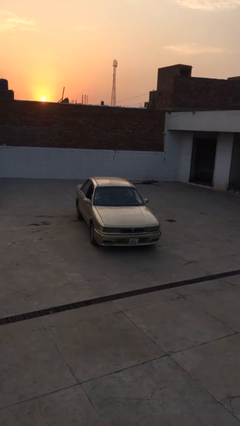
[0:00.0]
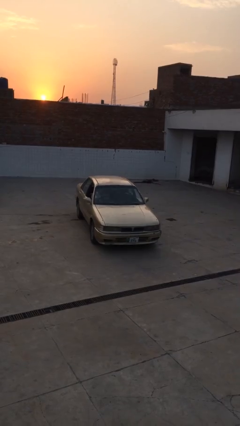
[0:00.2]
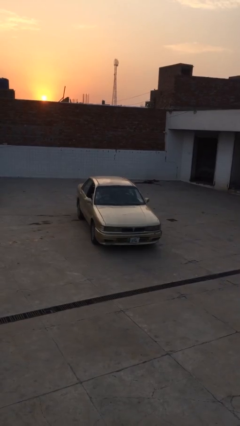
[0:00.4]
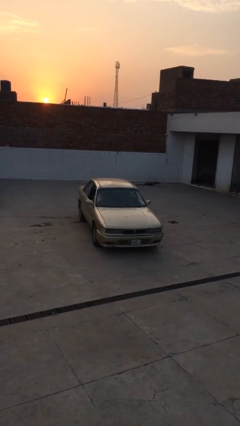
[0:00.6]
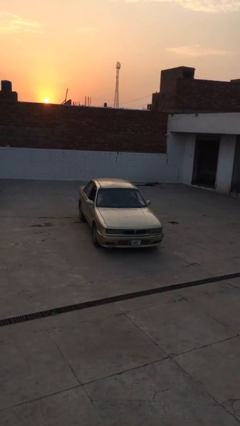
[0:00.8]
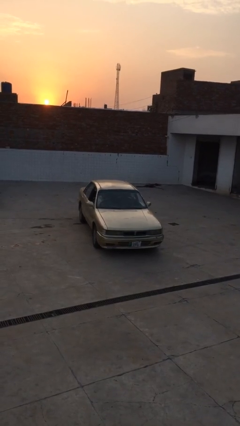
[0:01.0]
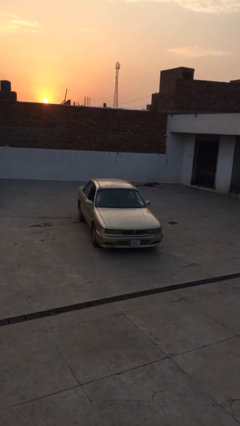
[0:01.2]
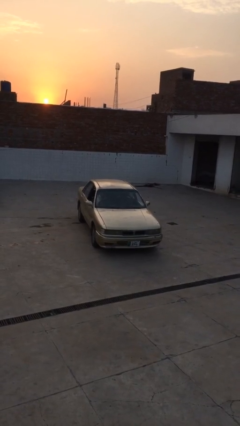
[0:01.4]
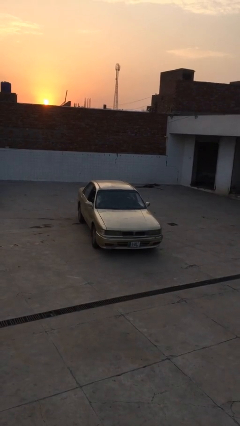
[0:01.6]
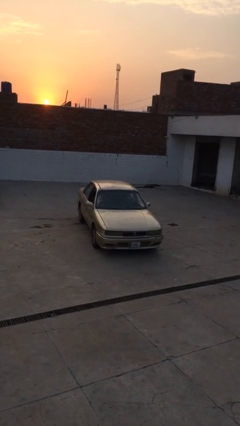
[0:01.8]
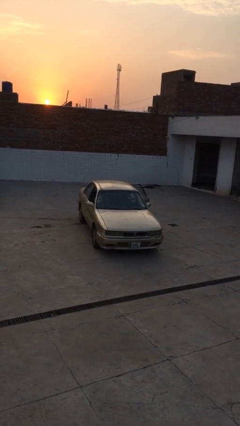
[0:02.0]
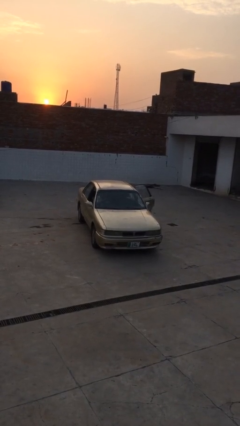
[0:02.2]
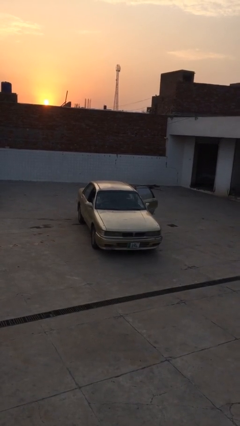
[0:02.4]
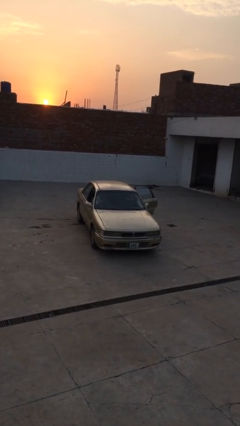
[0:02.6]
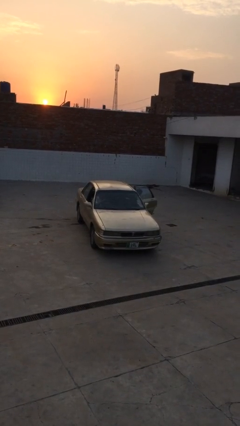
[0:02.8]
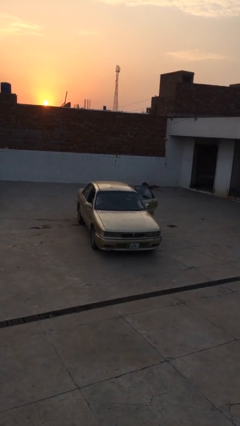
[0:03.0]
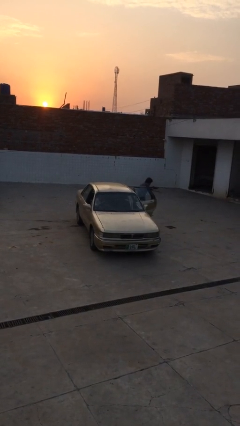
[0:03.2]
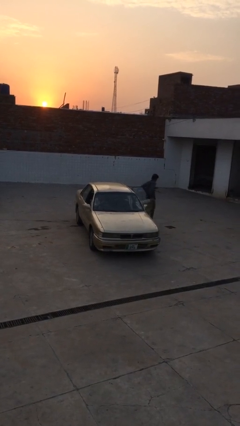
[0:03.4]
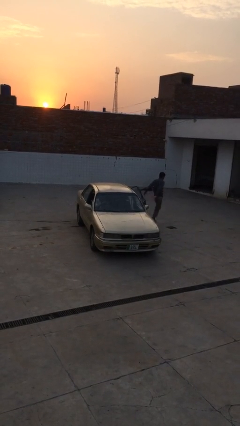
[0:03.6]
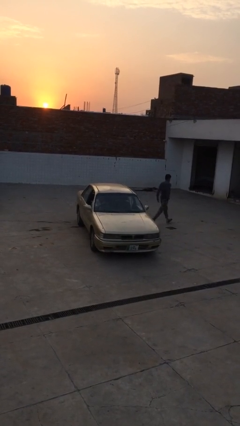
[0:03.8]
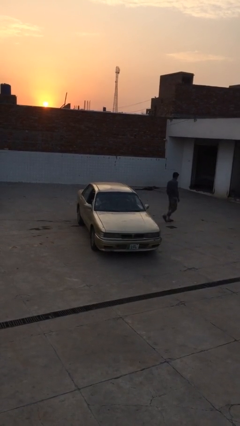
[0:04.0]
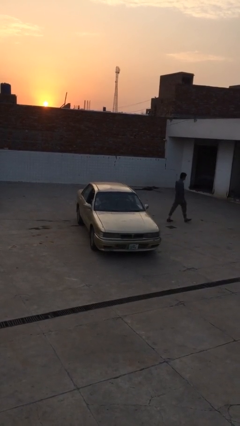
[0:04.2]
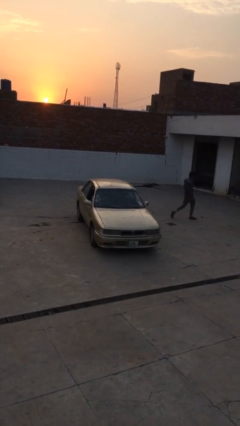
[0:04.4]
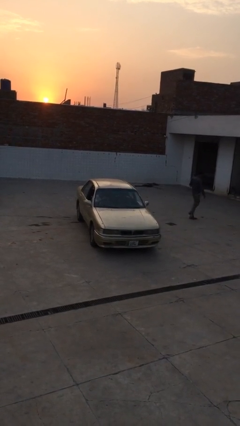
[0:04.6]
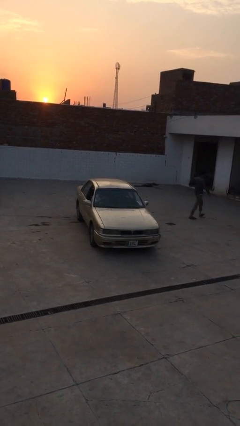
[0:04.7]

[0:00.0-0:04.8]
car drops off person

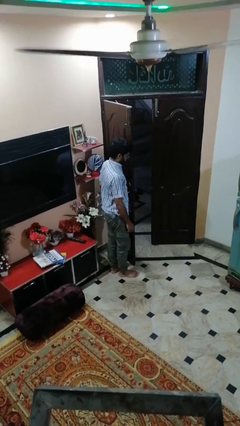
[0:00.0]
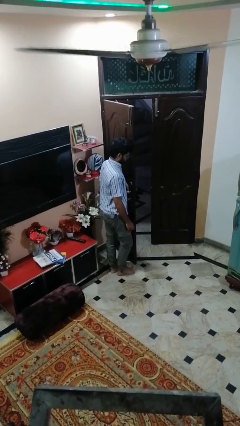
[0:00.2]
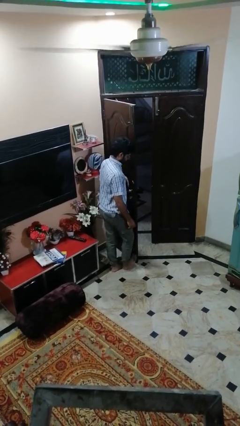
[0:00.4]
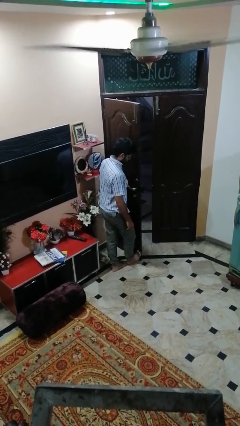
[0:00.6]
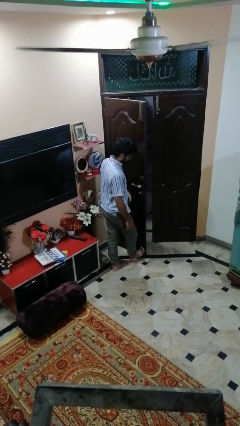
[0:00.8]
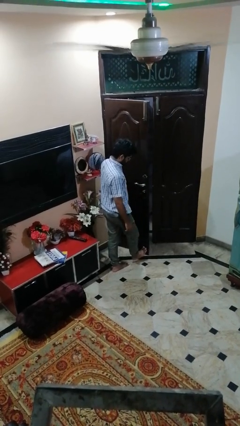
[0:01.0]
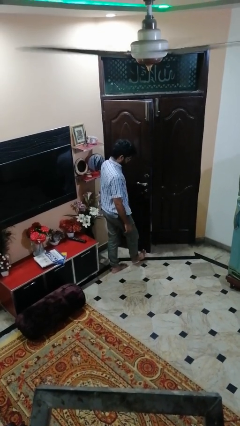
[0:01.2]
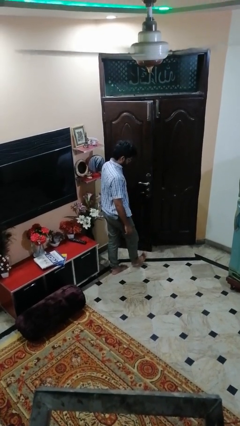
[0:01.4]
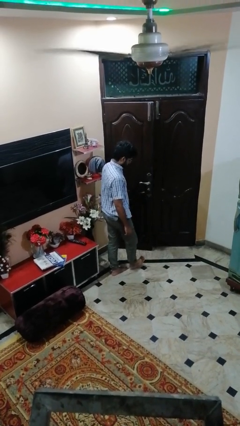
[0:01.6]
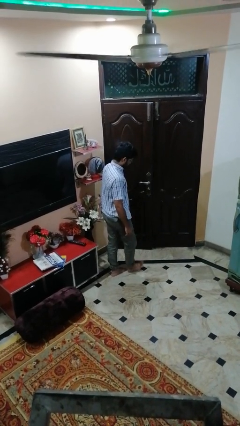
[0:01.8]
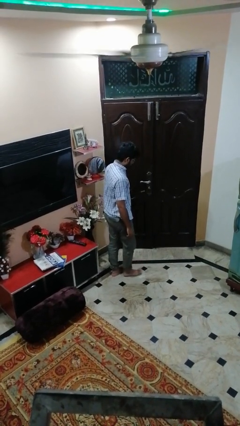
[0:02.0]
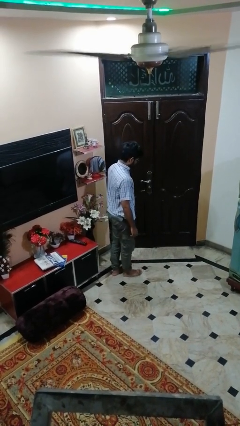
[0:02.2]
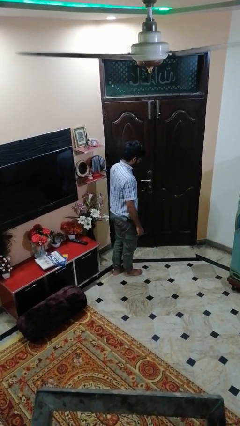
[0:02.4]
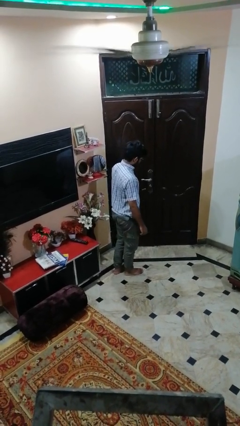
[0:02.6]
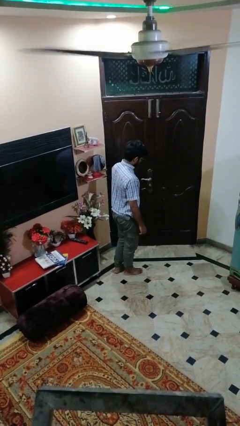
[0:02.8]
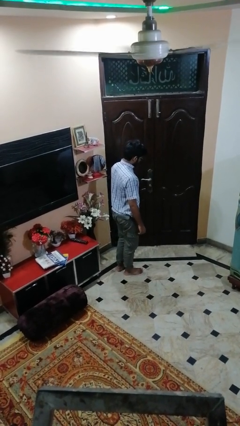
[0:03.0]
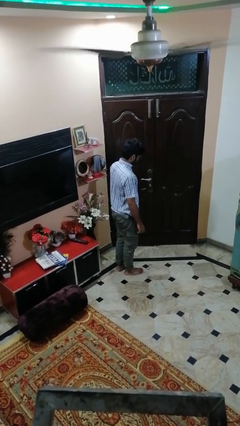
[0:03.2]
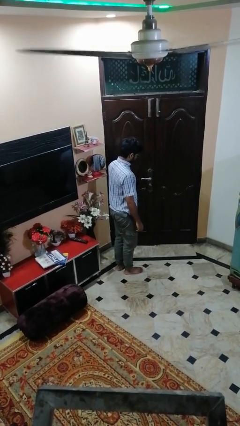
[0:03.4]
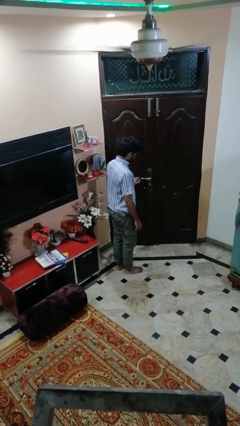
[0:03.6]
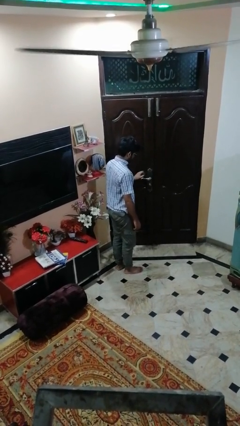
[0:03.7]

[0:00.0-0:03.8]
person closes door with foot

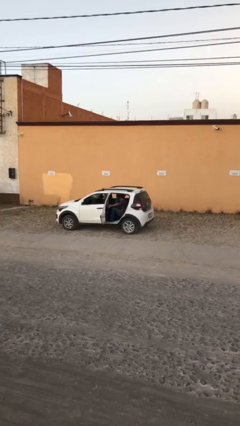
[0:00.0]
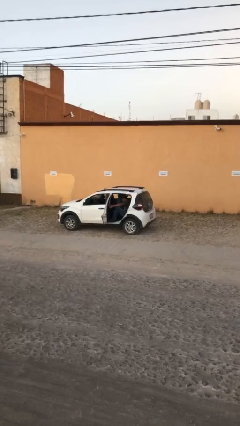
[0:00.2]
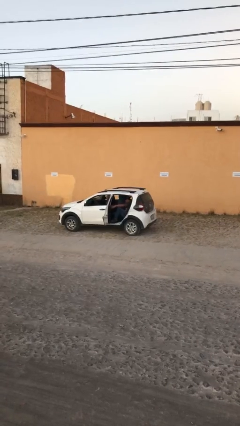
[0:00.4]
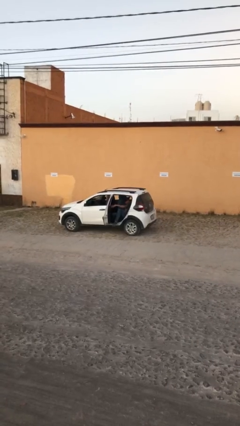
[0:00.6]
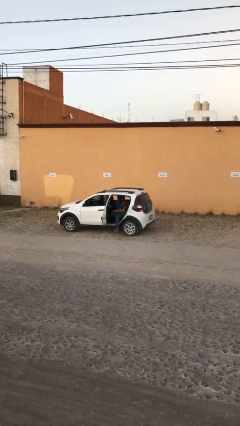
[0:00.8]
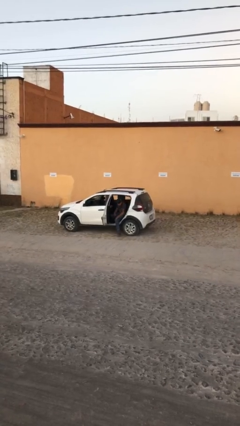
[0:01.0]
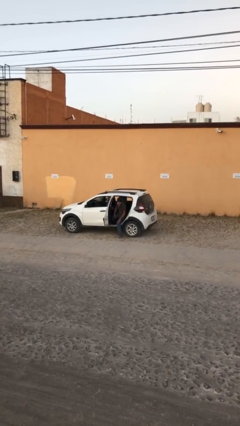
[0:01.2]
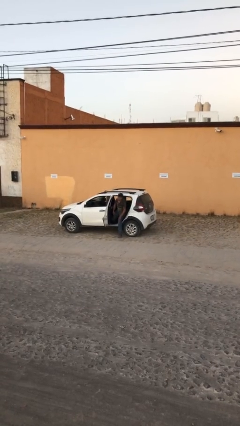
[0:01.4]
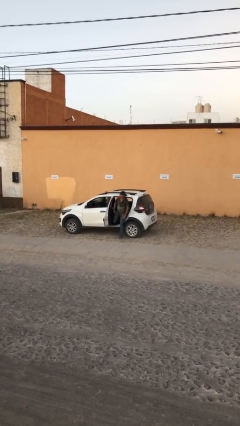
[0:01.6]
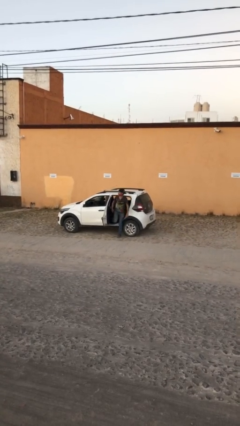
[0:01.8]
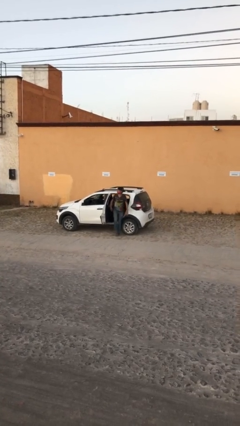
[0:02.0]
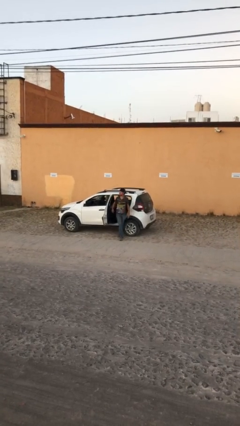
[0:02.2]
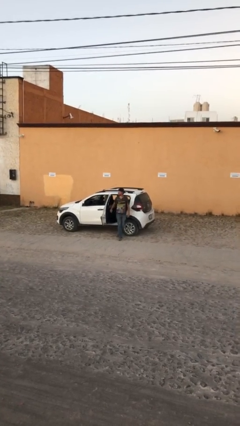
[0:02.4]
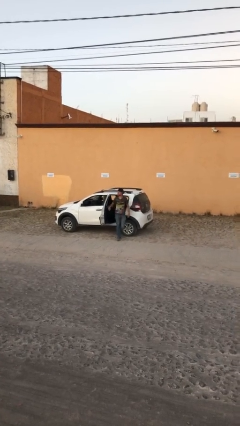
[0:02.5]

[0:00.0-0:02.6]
person exits car

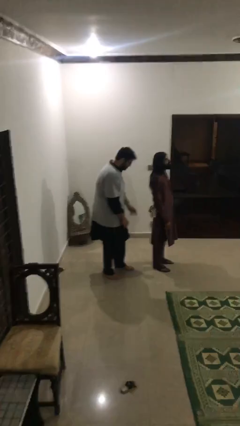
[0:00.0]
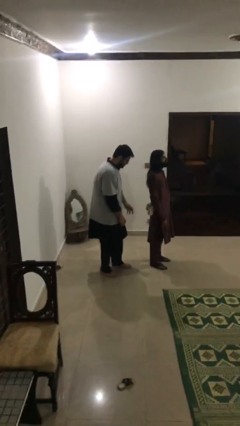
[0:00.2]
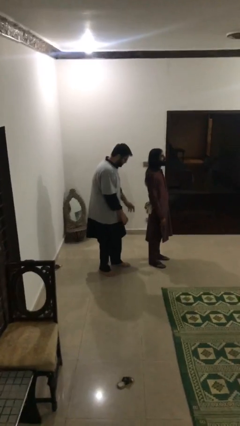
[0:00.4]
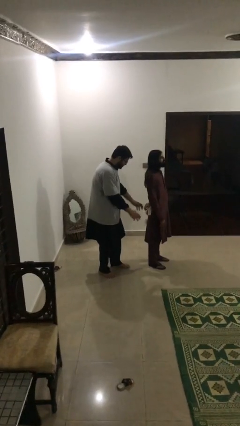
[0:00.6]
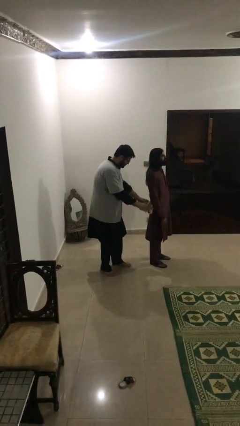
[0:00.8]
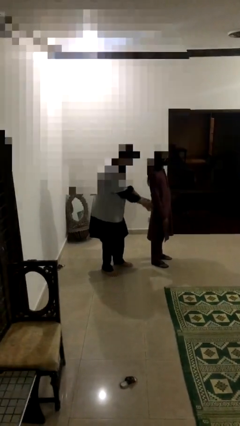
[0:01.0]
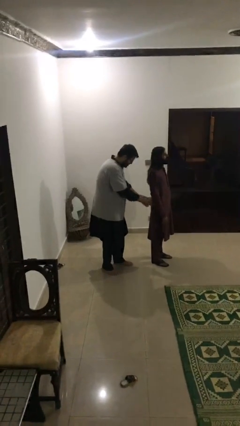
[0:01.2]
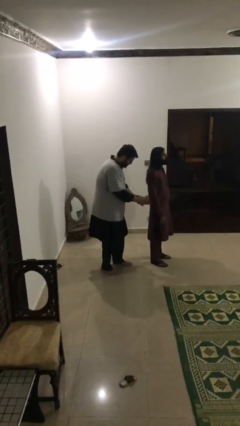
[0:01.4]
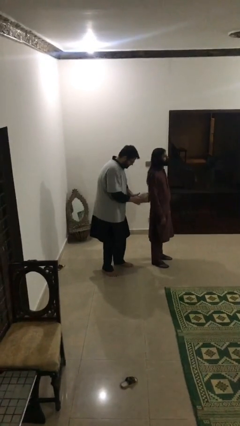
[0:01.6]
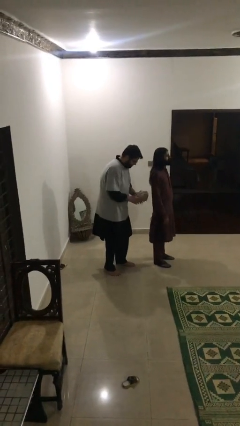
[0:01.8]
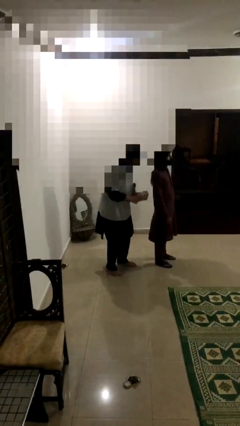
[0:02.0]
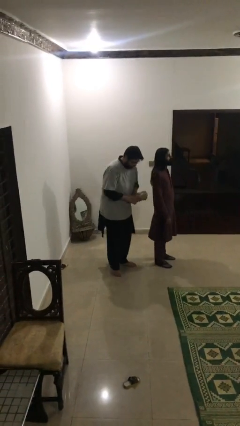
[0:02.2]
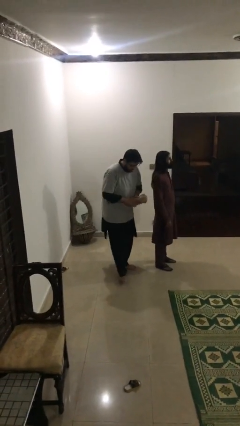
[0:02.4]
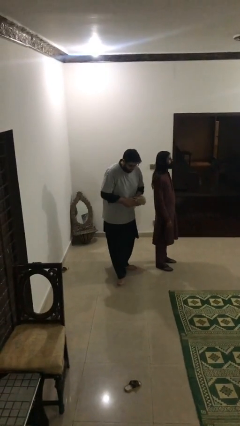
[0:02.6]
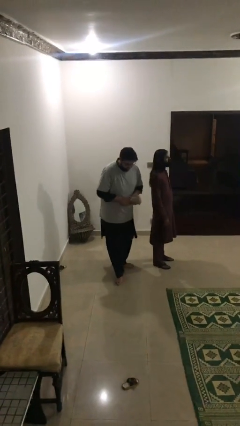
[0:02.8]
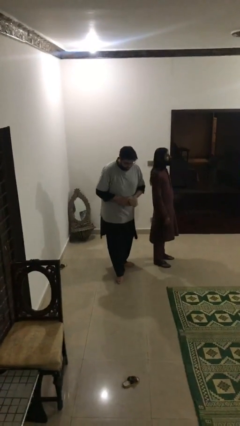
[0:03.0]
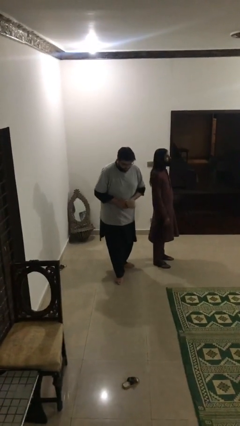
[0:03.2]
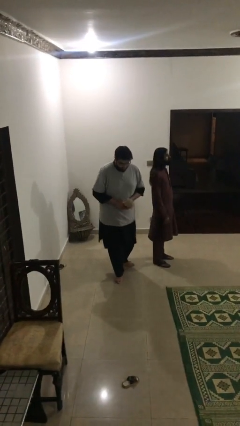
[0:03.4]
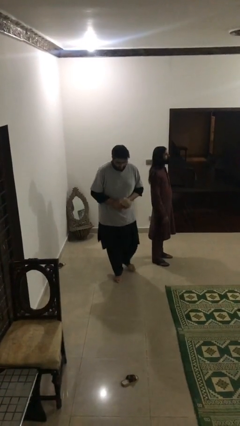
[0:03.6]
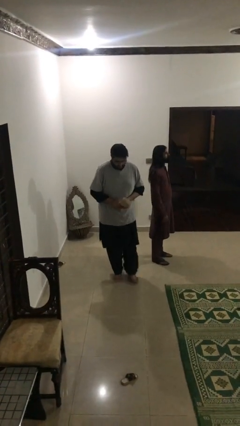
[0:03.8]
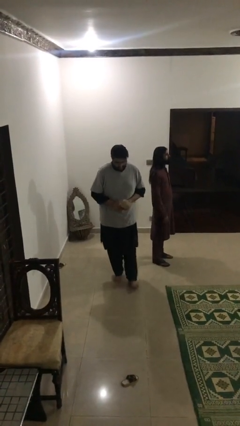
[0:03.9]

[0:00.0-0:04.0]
person steals object from person

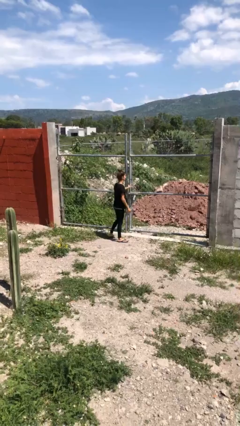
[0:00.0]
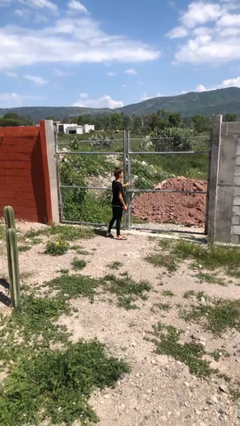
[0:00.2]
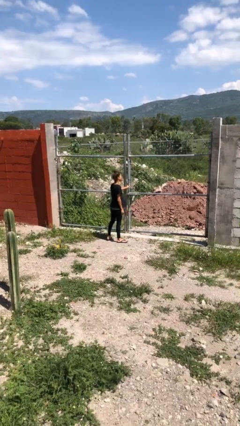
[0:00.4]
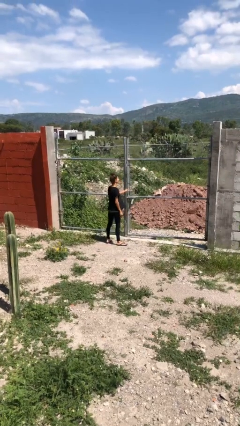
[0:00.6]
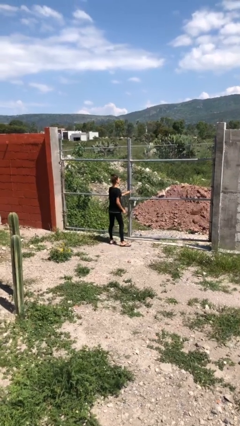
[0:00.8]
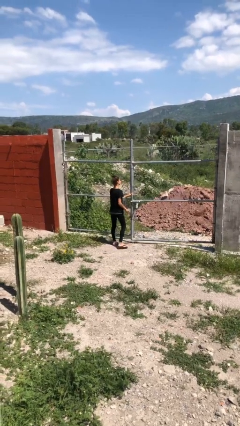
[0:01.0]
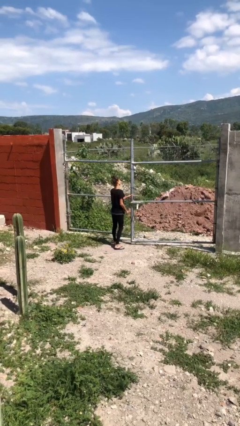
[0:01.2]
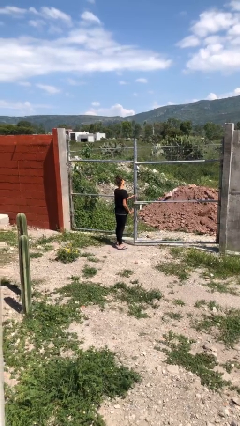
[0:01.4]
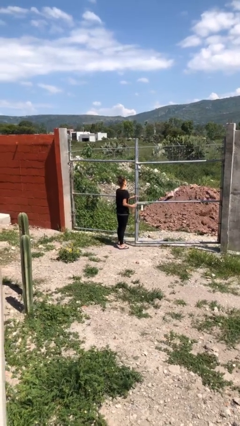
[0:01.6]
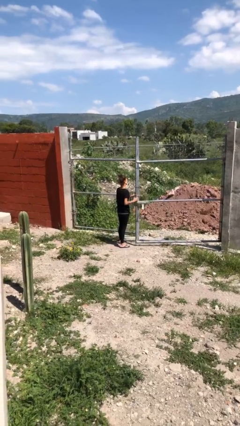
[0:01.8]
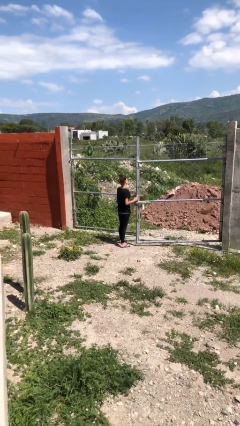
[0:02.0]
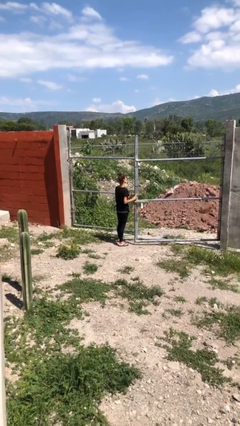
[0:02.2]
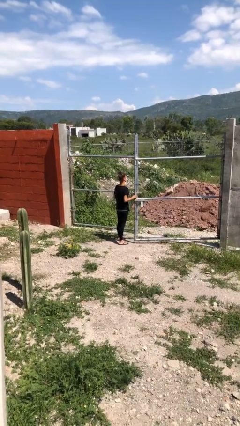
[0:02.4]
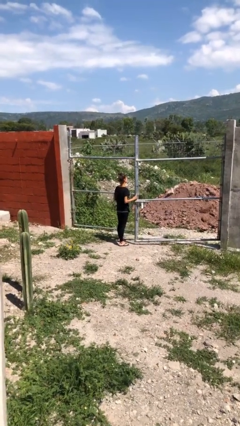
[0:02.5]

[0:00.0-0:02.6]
person opens gate
